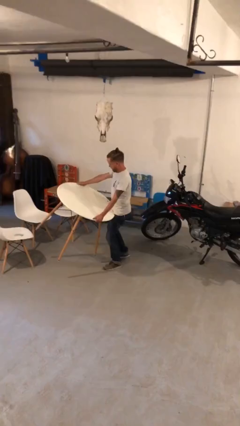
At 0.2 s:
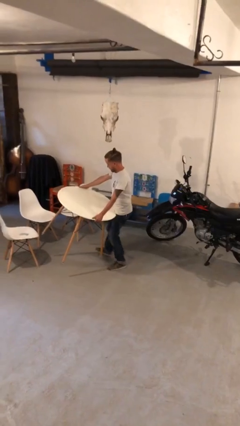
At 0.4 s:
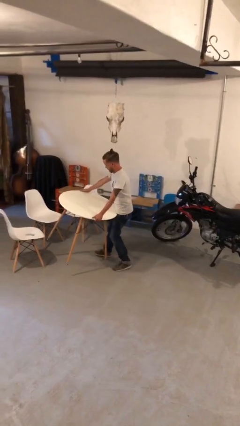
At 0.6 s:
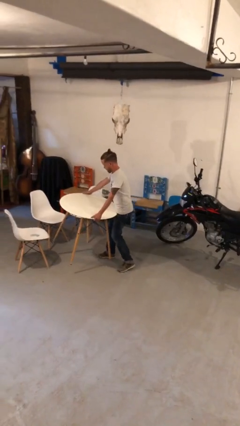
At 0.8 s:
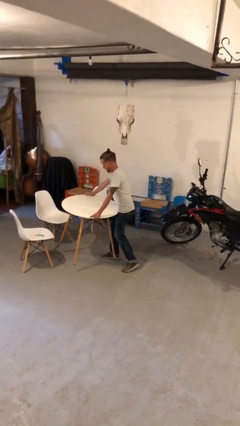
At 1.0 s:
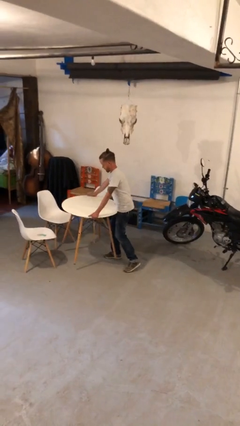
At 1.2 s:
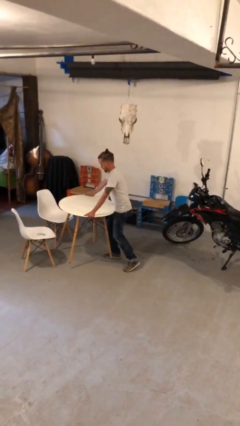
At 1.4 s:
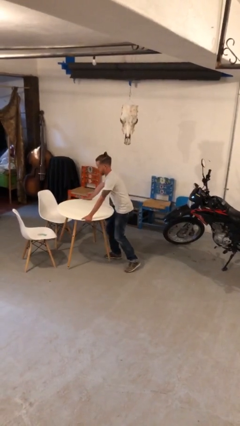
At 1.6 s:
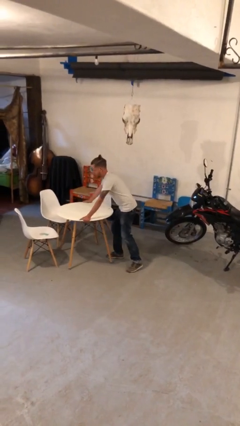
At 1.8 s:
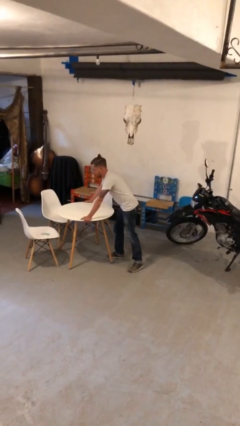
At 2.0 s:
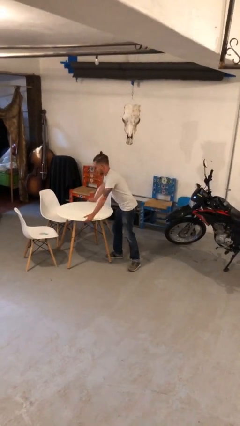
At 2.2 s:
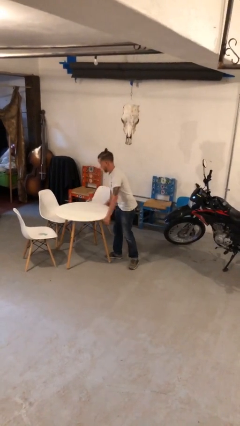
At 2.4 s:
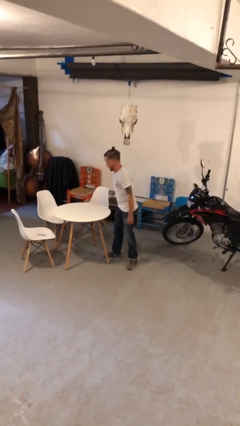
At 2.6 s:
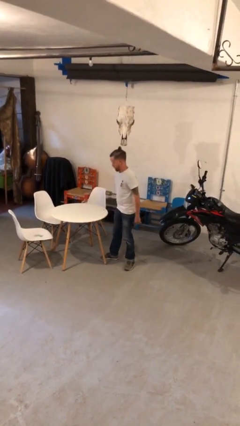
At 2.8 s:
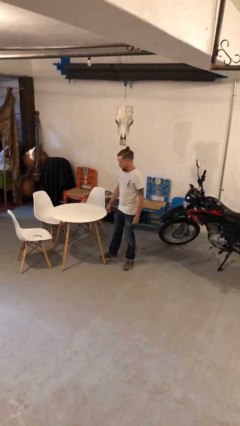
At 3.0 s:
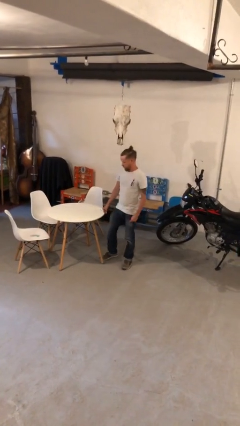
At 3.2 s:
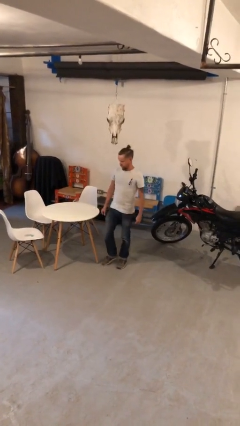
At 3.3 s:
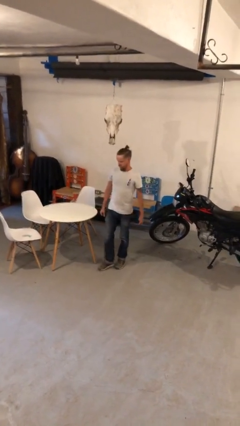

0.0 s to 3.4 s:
person puts down object on floor

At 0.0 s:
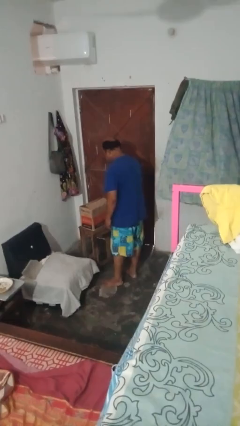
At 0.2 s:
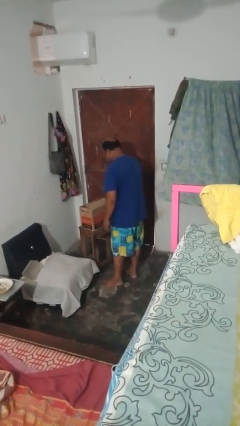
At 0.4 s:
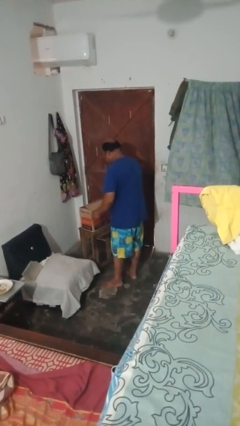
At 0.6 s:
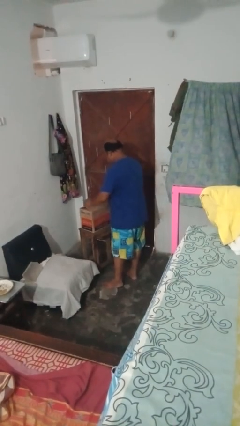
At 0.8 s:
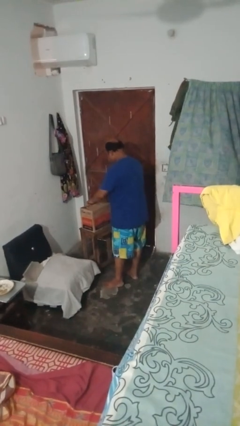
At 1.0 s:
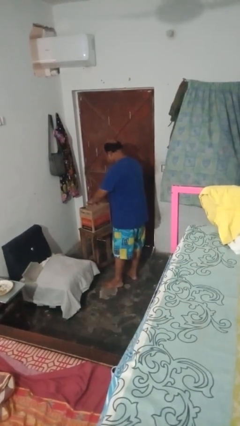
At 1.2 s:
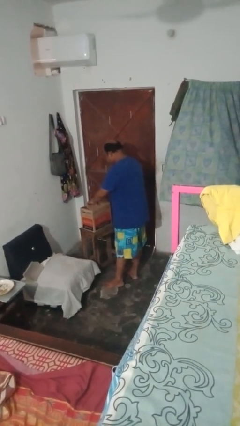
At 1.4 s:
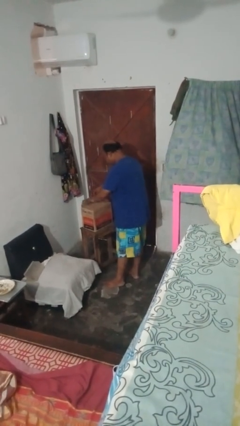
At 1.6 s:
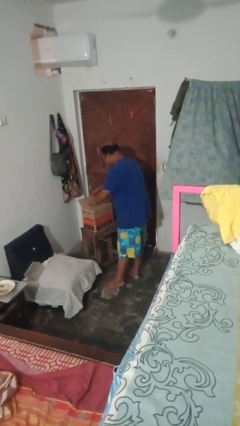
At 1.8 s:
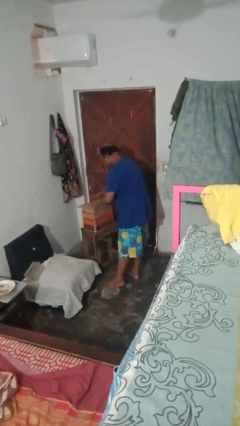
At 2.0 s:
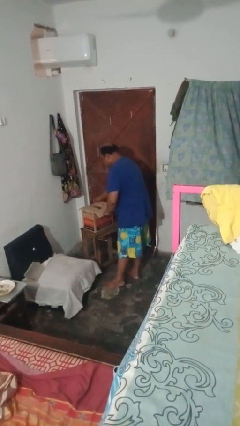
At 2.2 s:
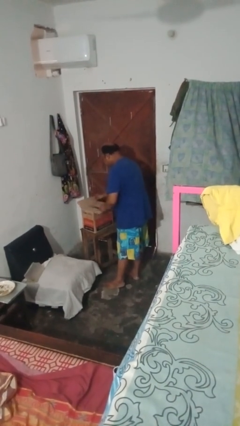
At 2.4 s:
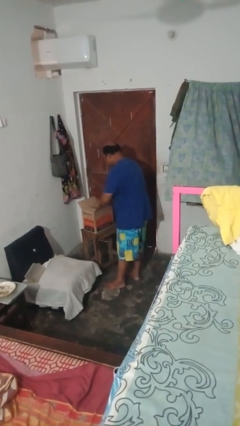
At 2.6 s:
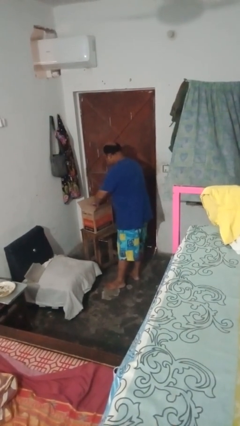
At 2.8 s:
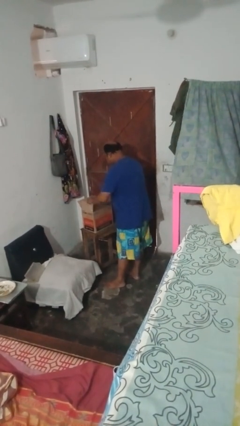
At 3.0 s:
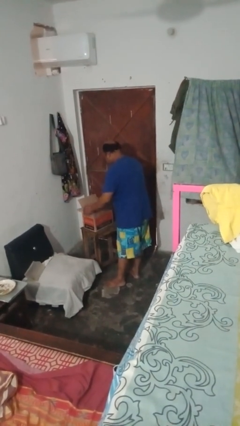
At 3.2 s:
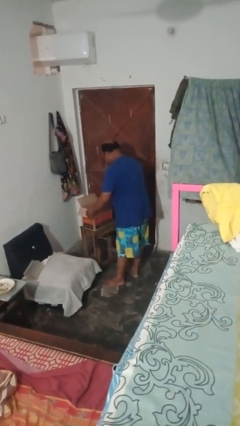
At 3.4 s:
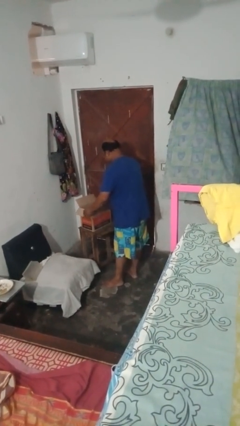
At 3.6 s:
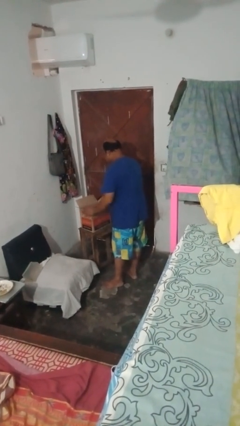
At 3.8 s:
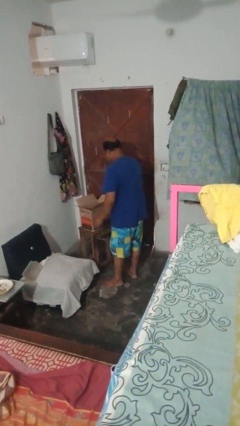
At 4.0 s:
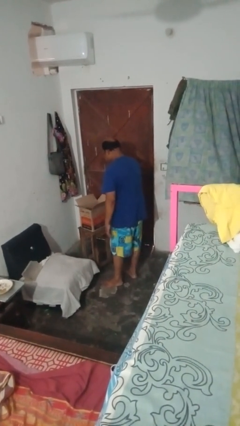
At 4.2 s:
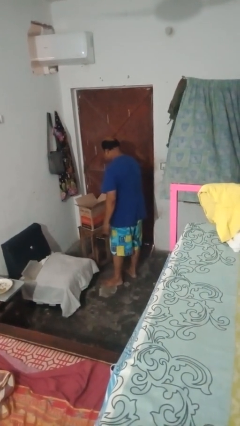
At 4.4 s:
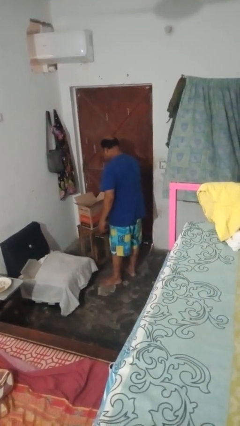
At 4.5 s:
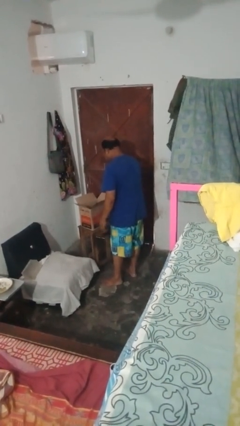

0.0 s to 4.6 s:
person opens box

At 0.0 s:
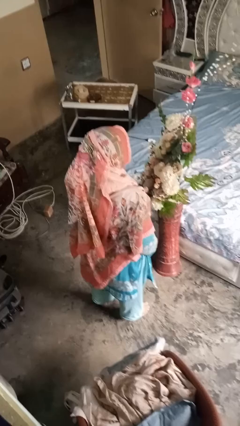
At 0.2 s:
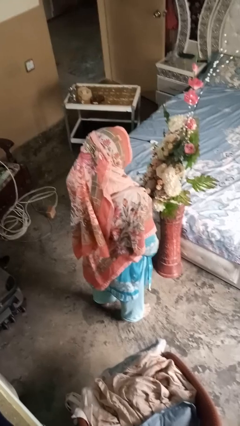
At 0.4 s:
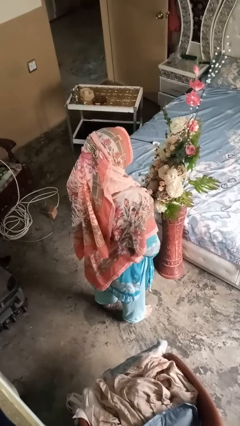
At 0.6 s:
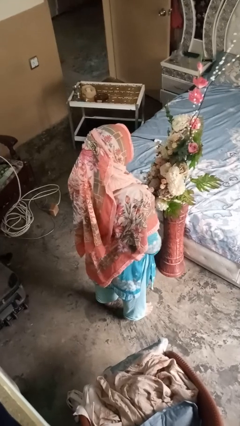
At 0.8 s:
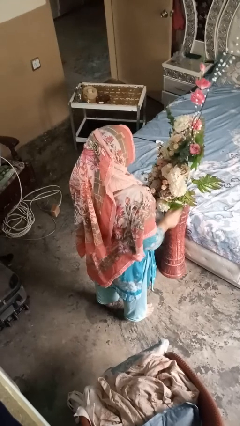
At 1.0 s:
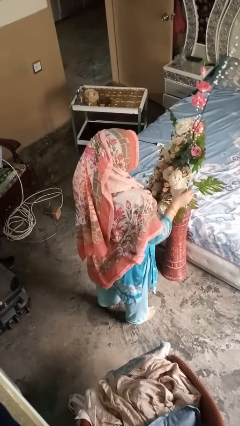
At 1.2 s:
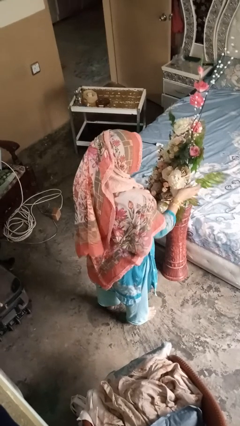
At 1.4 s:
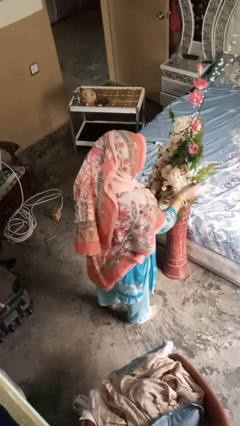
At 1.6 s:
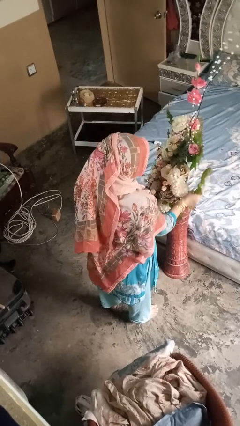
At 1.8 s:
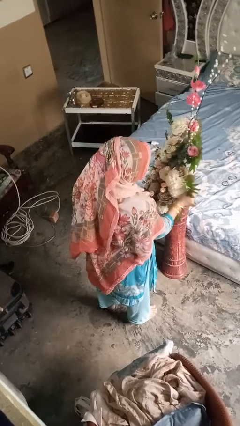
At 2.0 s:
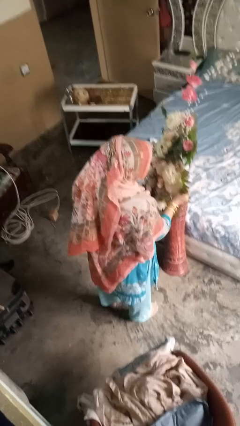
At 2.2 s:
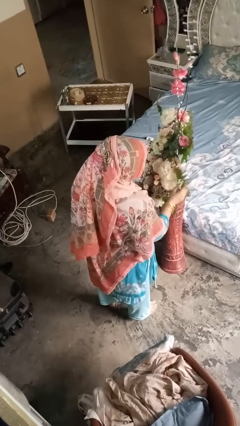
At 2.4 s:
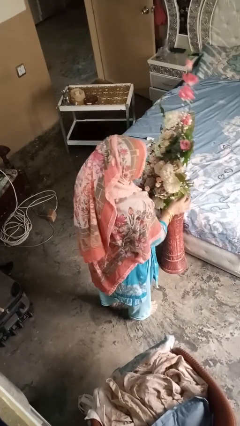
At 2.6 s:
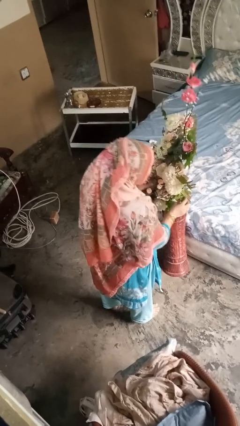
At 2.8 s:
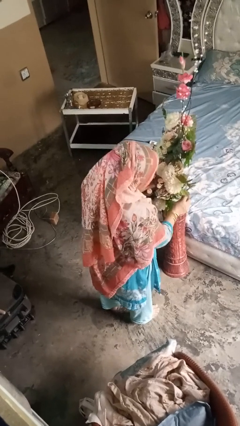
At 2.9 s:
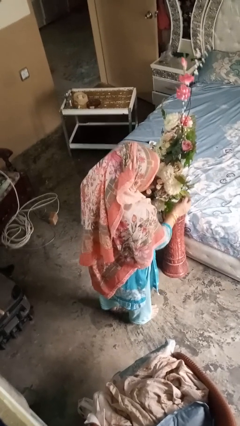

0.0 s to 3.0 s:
person arranges flowers in vase

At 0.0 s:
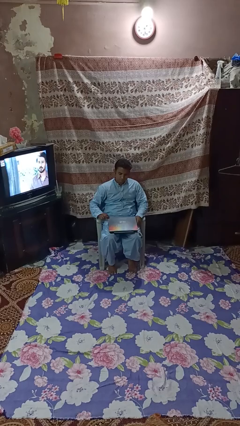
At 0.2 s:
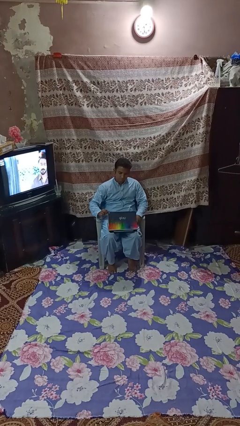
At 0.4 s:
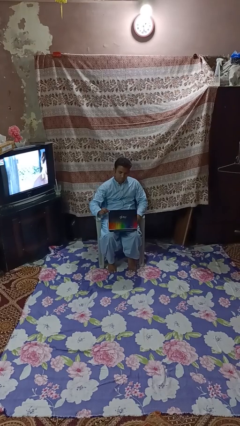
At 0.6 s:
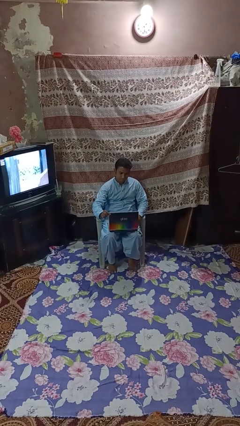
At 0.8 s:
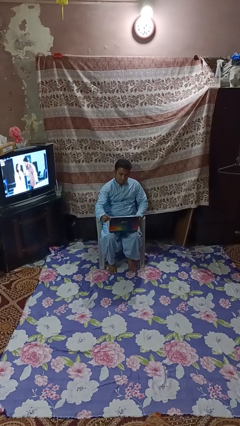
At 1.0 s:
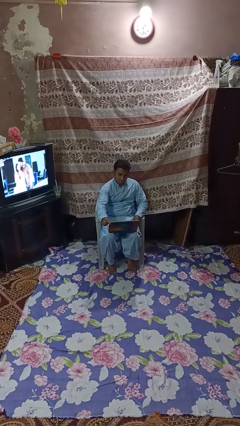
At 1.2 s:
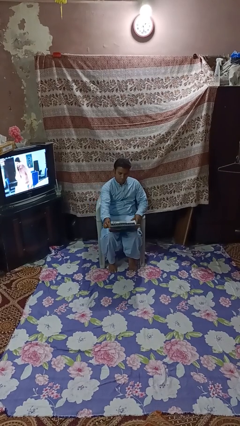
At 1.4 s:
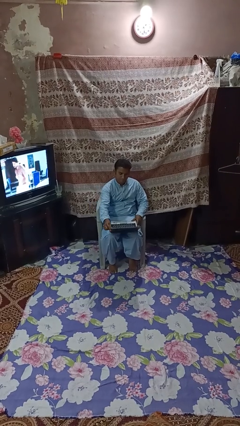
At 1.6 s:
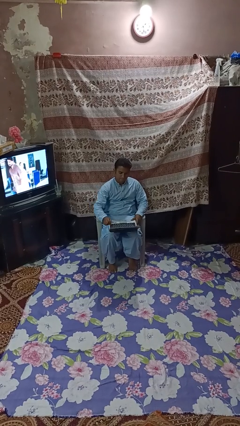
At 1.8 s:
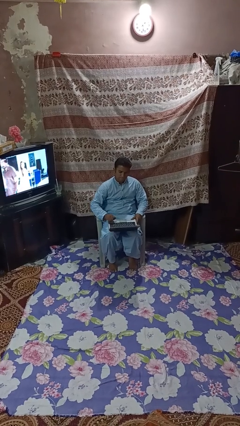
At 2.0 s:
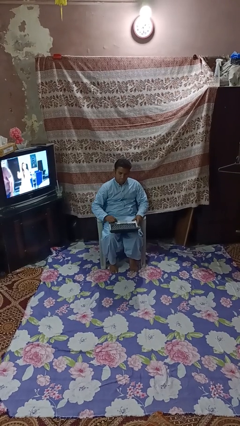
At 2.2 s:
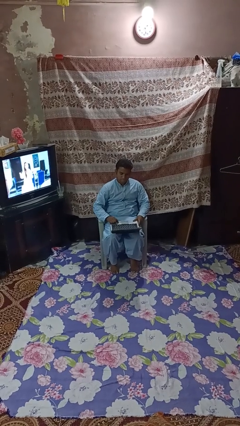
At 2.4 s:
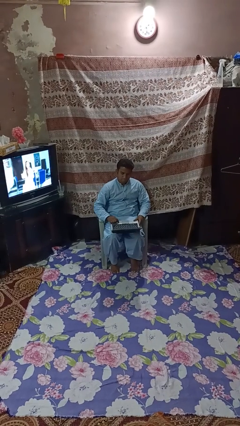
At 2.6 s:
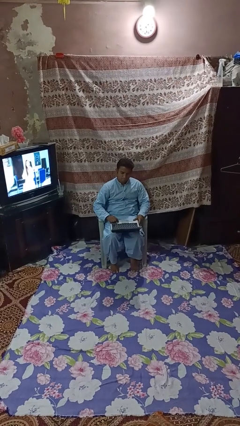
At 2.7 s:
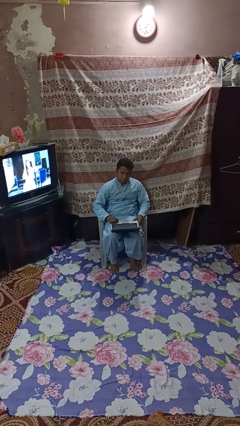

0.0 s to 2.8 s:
person opens laptop

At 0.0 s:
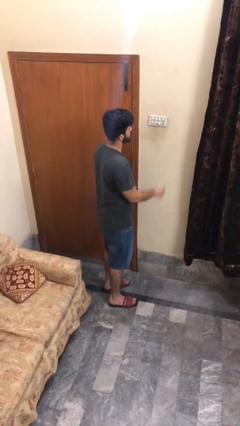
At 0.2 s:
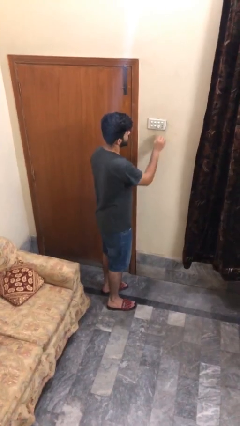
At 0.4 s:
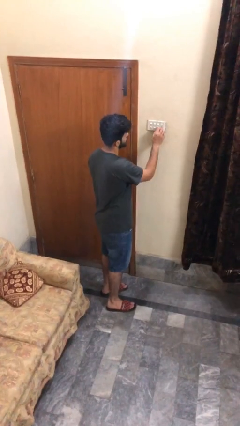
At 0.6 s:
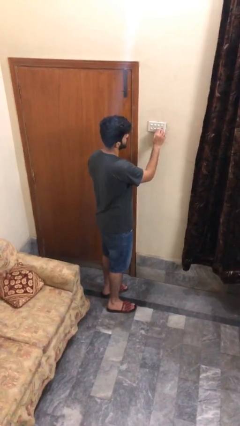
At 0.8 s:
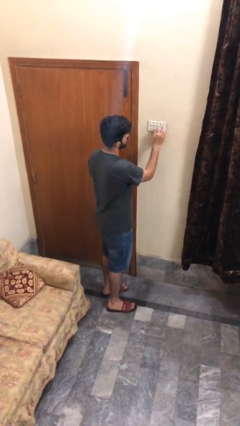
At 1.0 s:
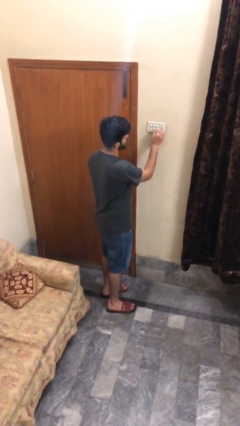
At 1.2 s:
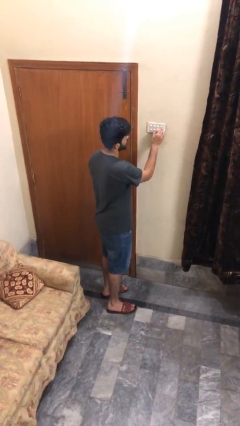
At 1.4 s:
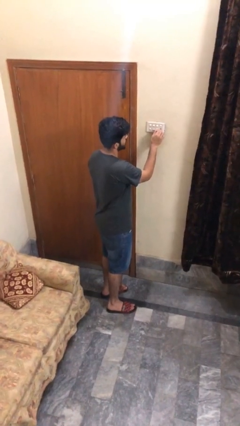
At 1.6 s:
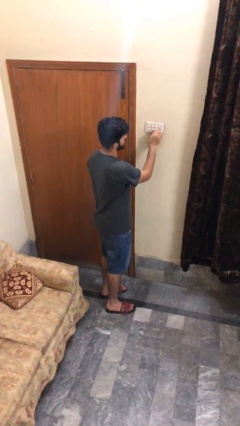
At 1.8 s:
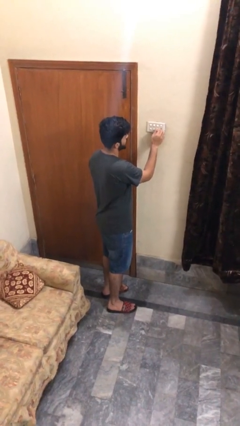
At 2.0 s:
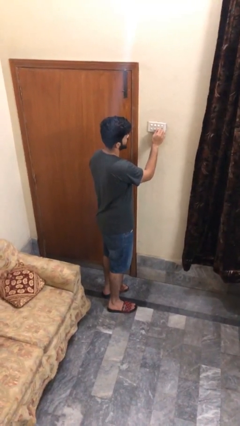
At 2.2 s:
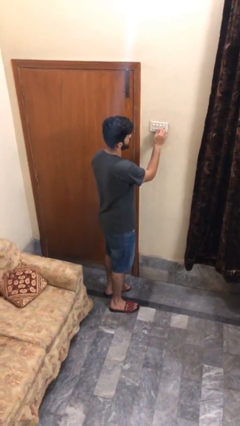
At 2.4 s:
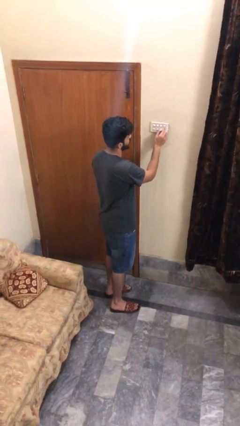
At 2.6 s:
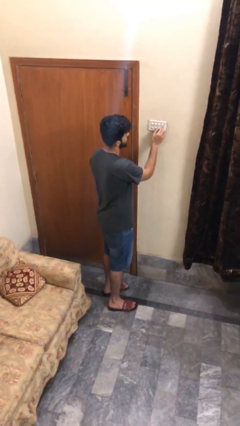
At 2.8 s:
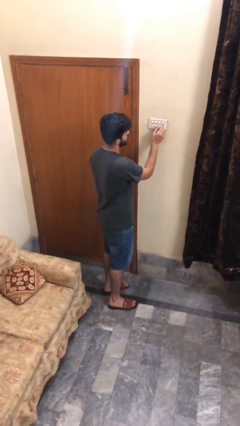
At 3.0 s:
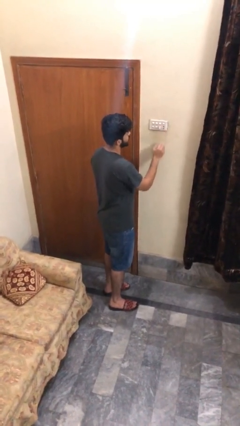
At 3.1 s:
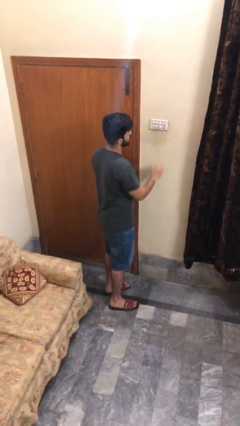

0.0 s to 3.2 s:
person adjusts thermostat

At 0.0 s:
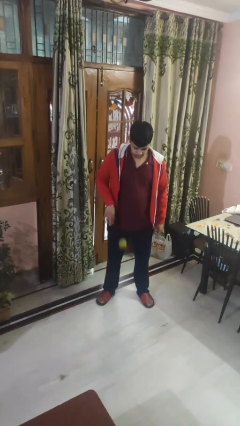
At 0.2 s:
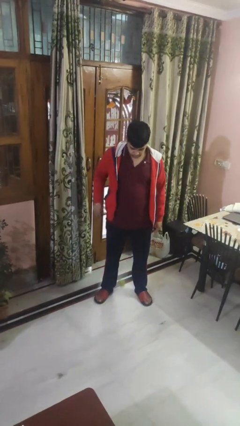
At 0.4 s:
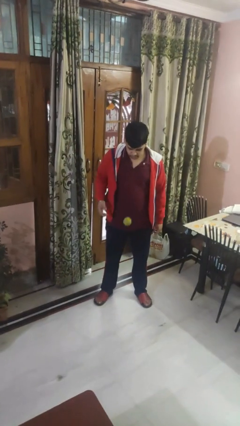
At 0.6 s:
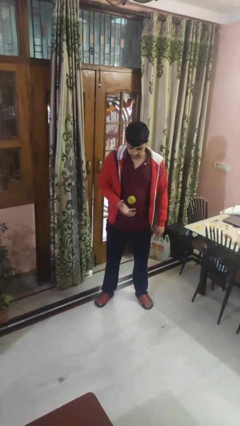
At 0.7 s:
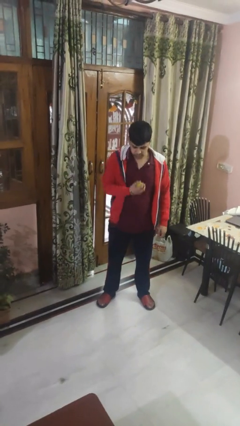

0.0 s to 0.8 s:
person bounces ball on floor
